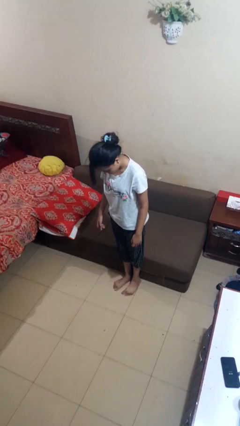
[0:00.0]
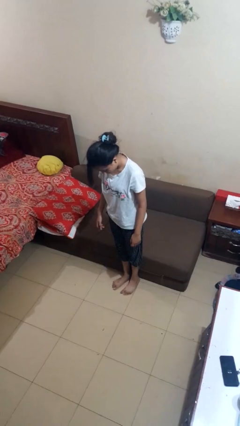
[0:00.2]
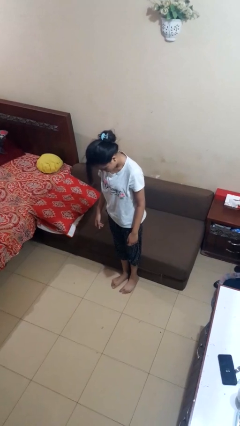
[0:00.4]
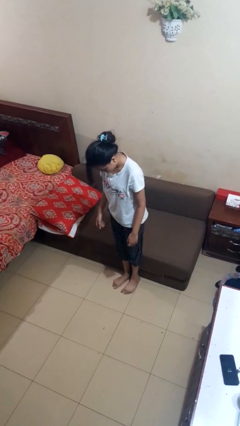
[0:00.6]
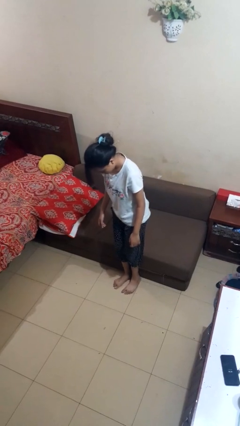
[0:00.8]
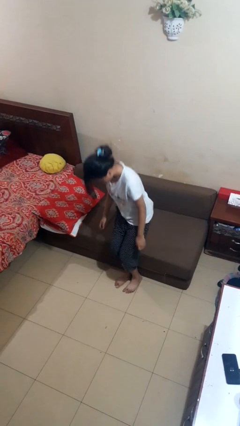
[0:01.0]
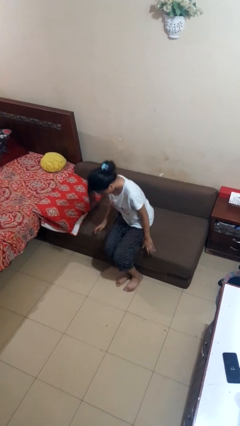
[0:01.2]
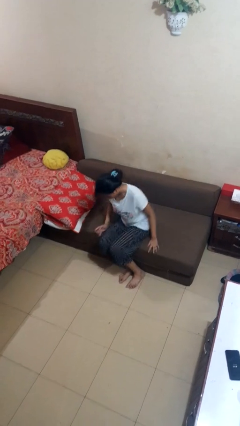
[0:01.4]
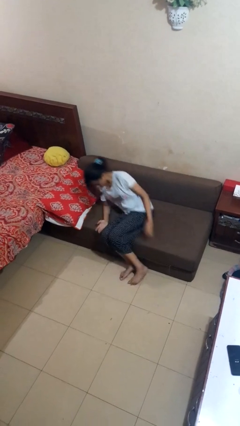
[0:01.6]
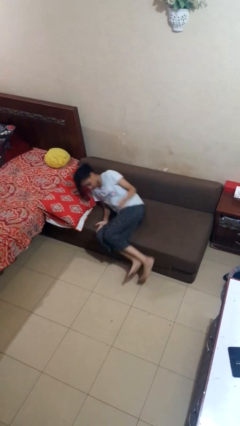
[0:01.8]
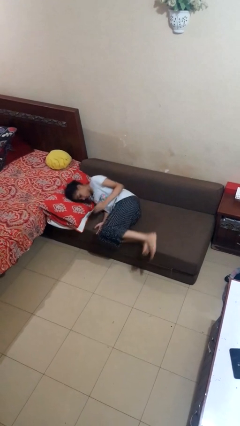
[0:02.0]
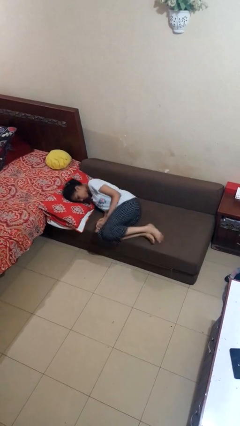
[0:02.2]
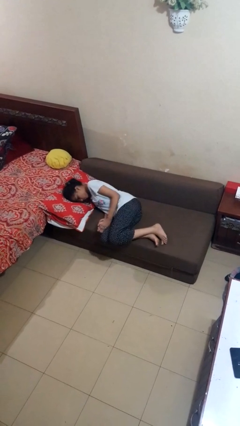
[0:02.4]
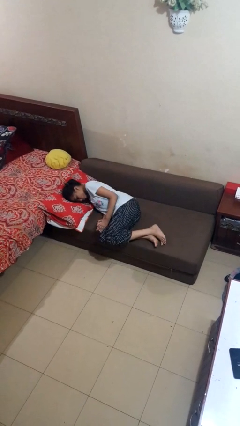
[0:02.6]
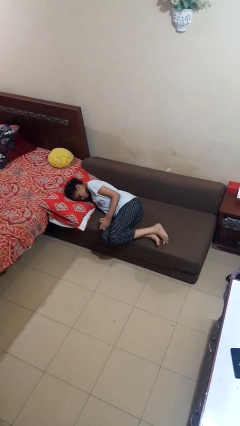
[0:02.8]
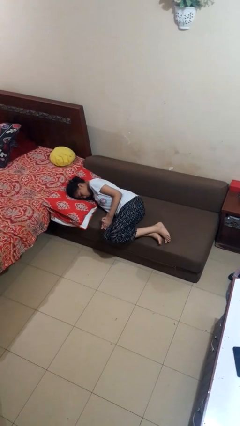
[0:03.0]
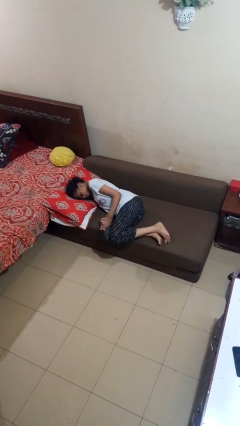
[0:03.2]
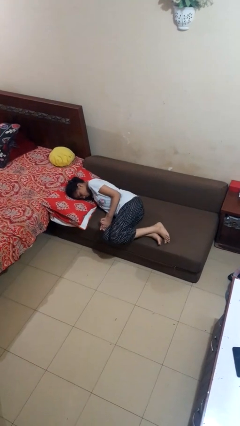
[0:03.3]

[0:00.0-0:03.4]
person lies down on couch

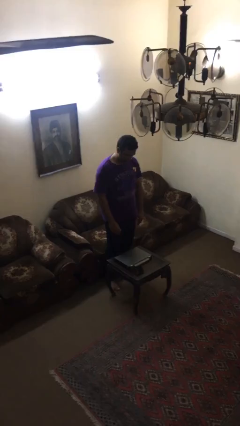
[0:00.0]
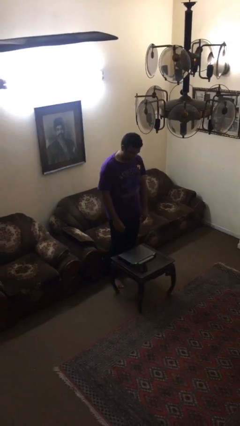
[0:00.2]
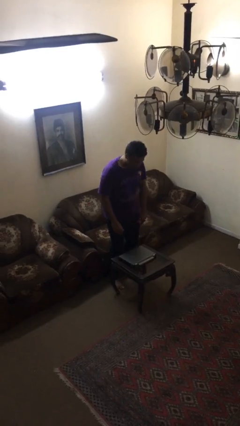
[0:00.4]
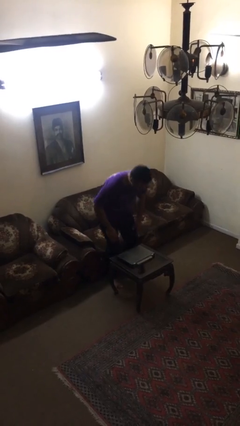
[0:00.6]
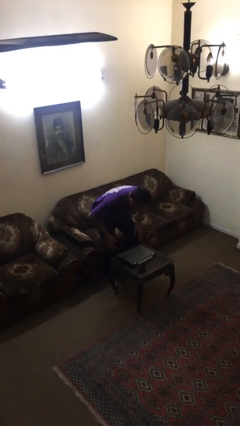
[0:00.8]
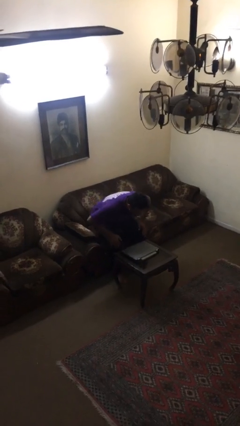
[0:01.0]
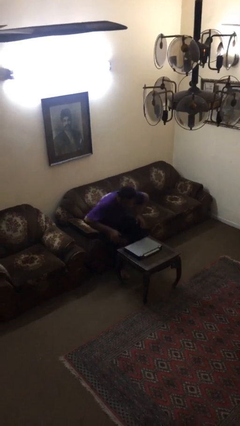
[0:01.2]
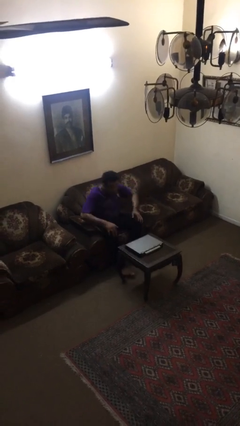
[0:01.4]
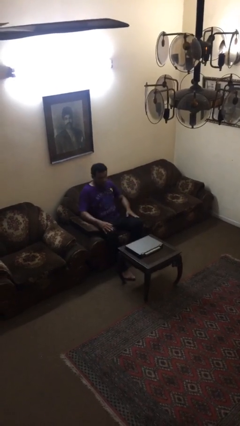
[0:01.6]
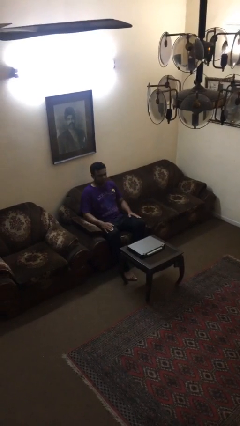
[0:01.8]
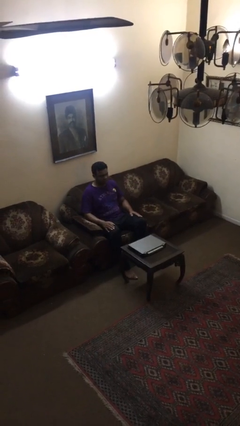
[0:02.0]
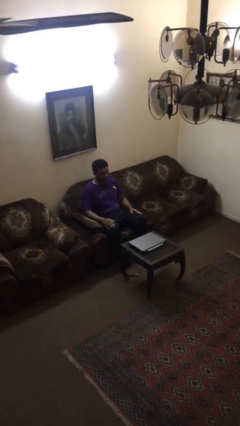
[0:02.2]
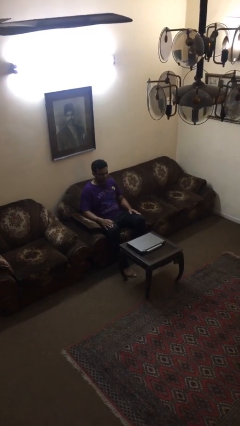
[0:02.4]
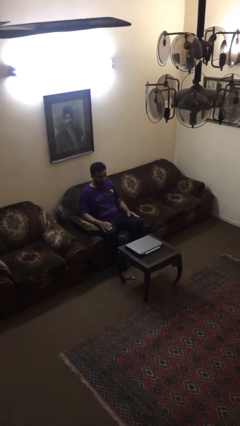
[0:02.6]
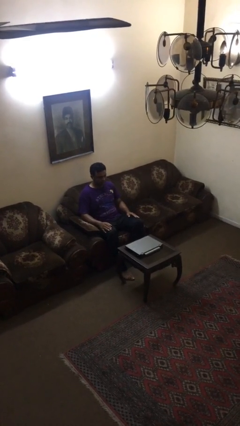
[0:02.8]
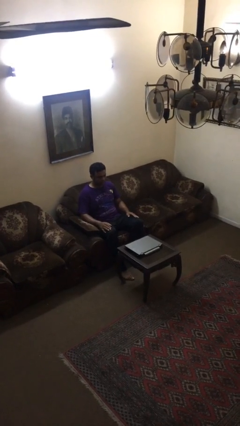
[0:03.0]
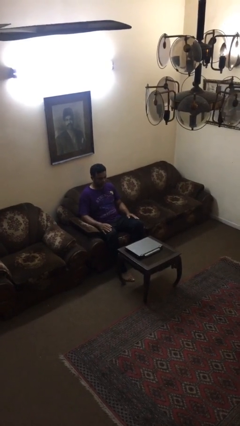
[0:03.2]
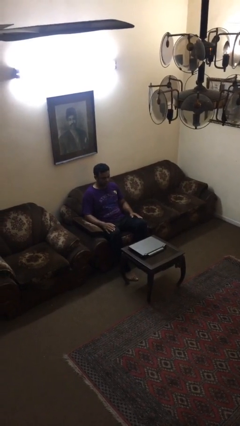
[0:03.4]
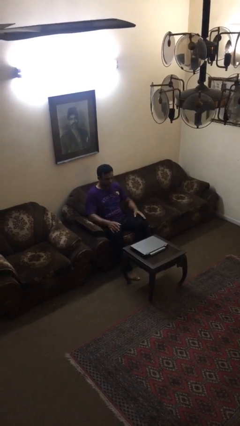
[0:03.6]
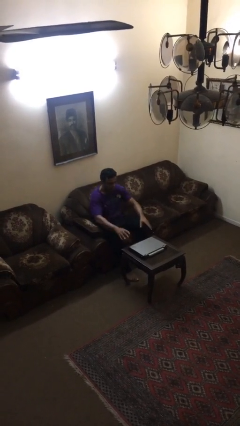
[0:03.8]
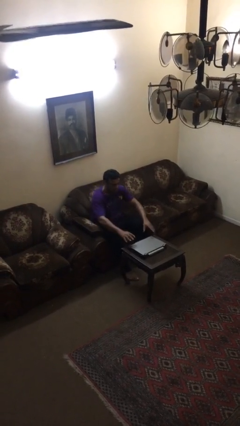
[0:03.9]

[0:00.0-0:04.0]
person sits down

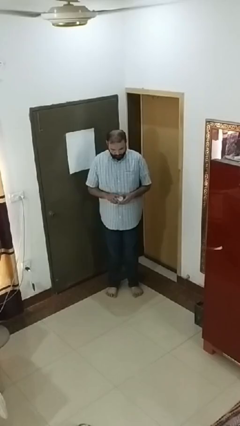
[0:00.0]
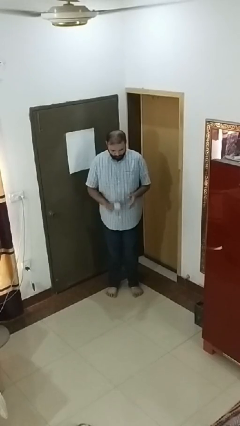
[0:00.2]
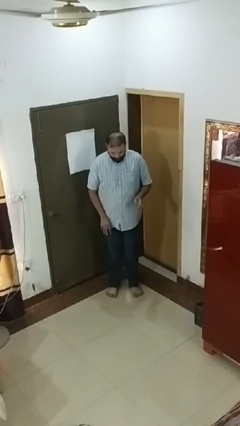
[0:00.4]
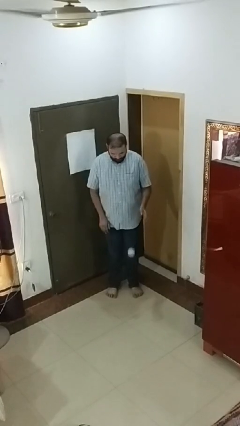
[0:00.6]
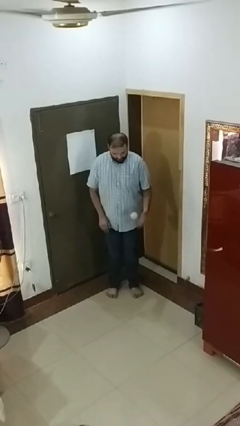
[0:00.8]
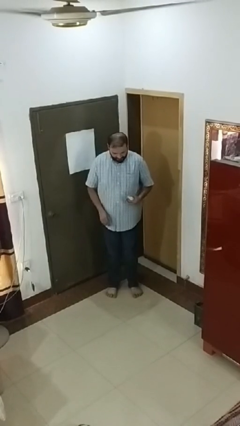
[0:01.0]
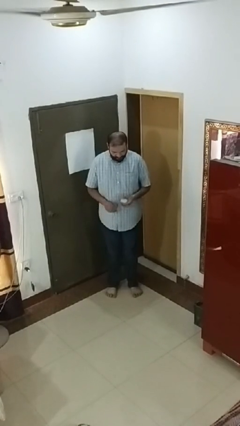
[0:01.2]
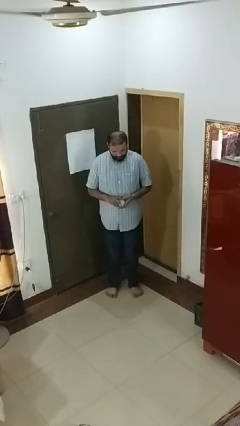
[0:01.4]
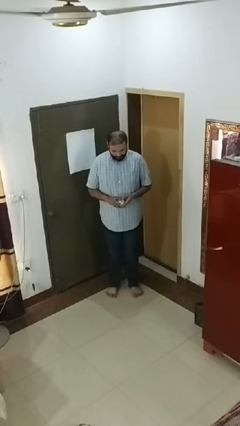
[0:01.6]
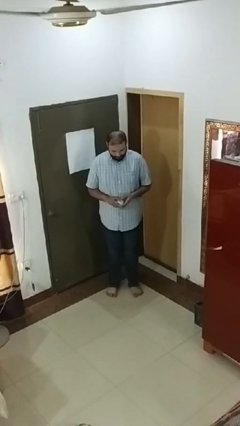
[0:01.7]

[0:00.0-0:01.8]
person bounces ball on floor

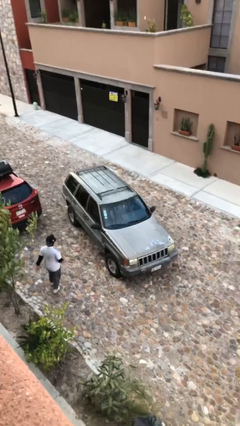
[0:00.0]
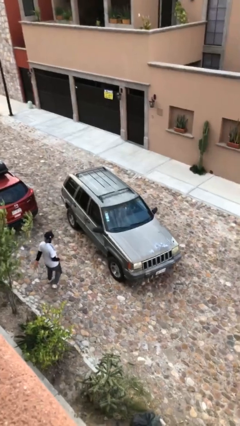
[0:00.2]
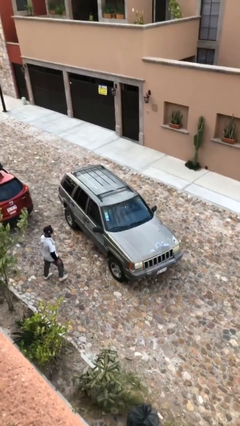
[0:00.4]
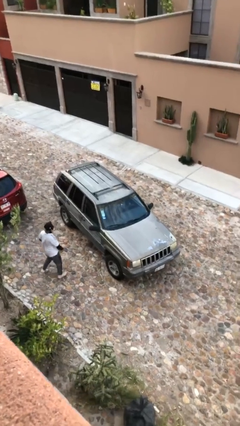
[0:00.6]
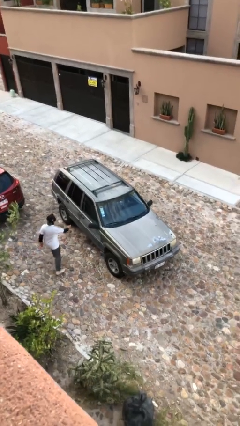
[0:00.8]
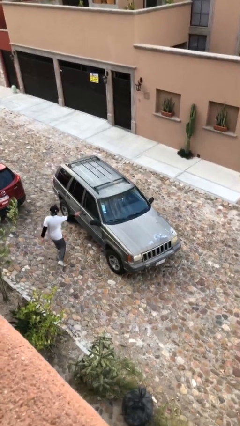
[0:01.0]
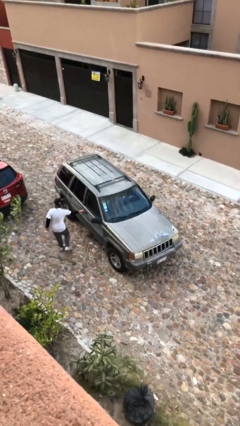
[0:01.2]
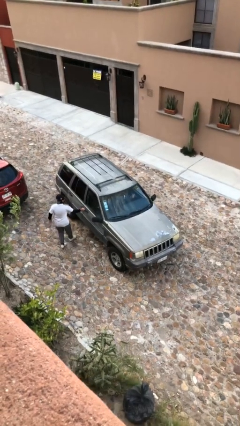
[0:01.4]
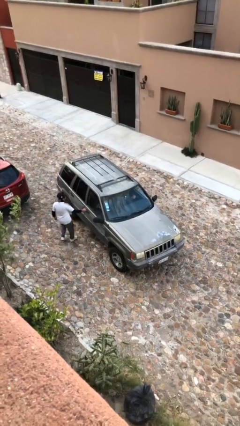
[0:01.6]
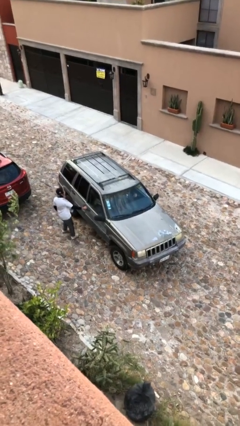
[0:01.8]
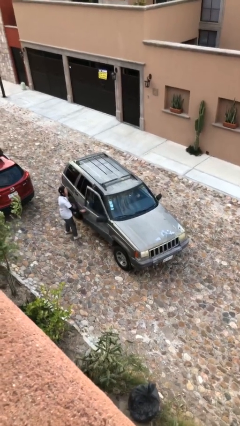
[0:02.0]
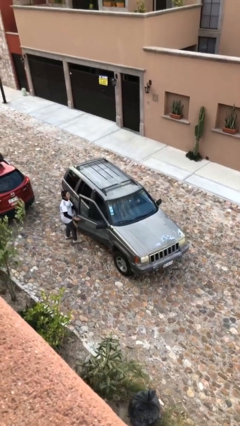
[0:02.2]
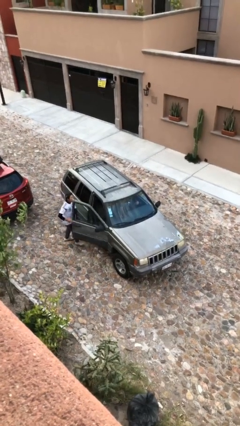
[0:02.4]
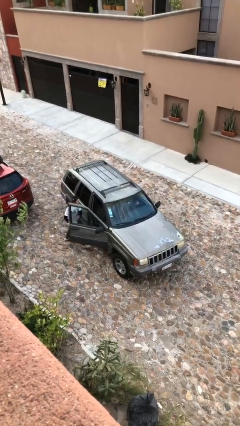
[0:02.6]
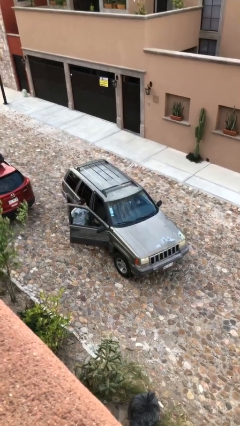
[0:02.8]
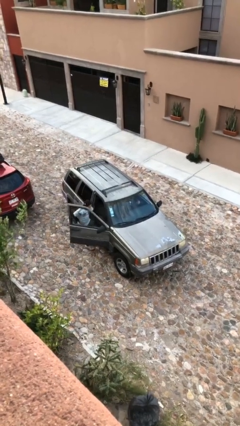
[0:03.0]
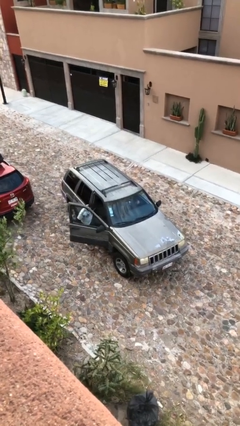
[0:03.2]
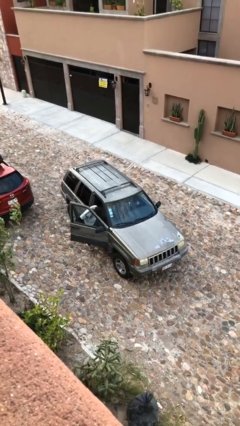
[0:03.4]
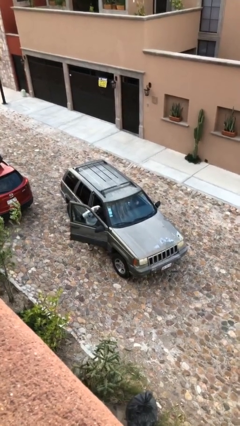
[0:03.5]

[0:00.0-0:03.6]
car picks up person

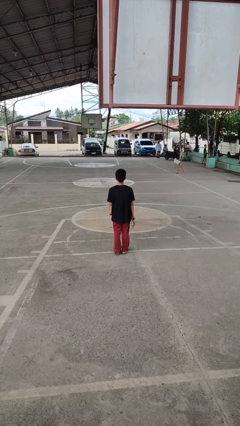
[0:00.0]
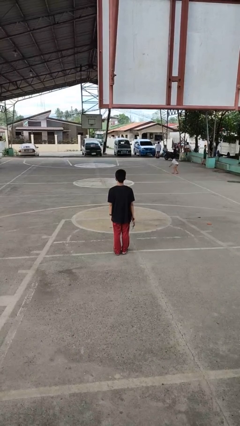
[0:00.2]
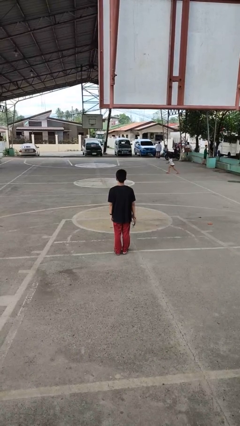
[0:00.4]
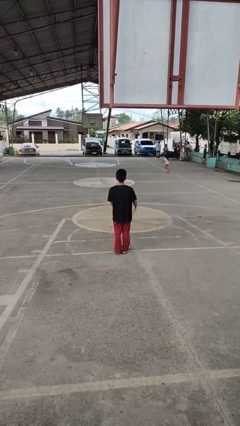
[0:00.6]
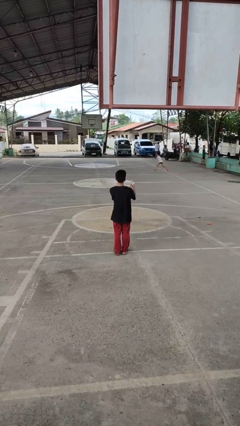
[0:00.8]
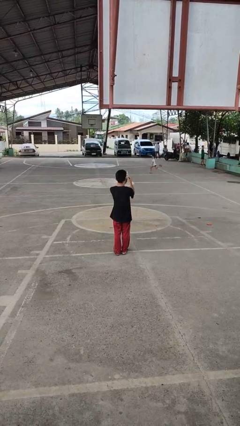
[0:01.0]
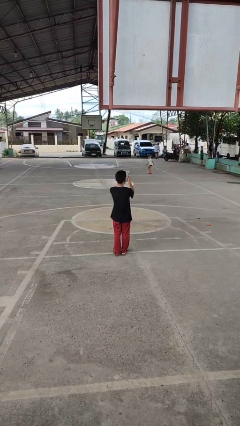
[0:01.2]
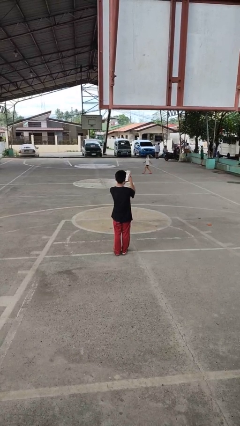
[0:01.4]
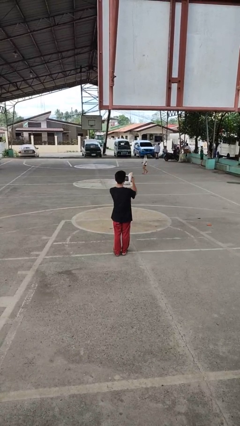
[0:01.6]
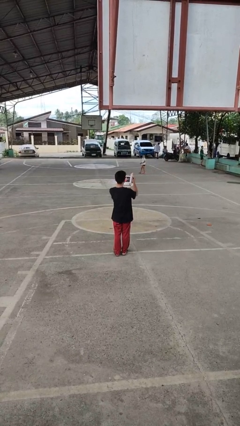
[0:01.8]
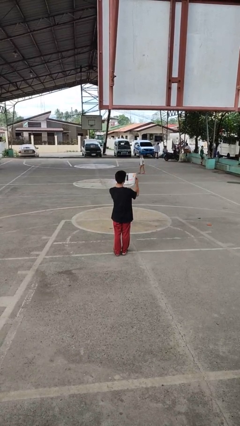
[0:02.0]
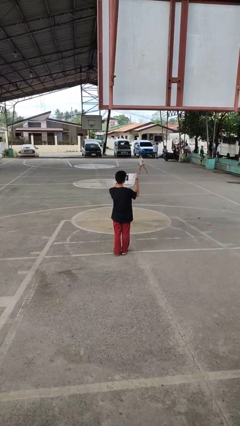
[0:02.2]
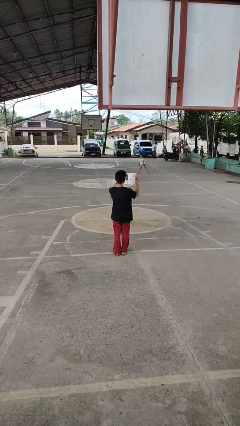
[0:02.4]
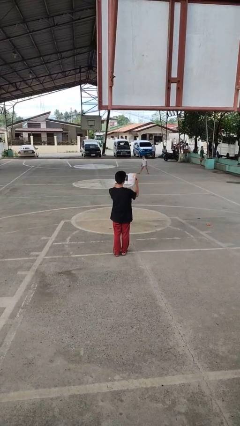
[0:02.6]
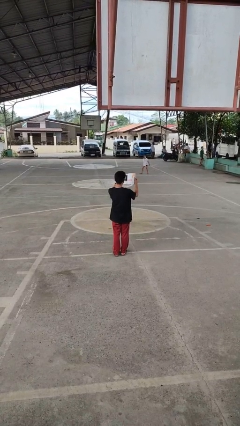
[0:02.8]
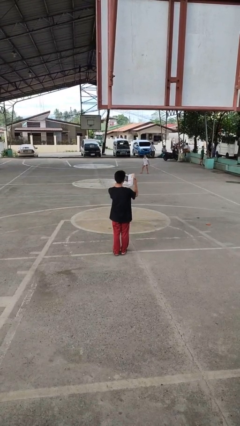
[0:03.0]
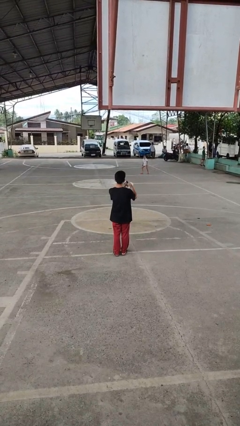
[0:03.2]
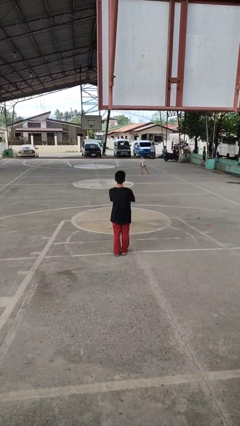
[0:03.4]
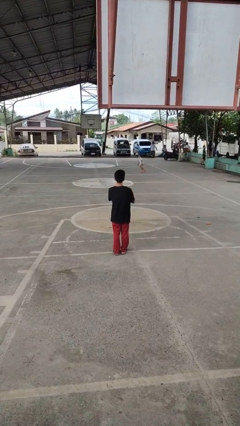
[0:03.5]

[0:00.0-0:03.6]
person reads magazine

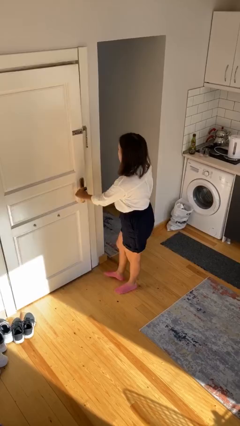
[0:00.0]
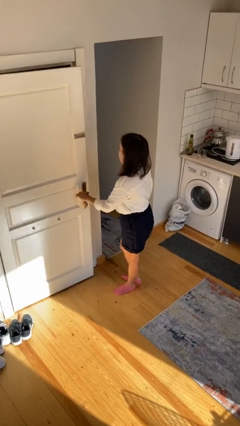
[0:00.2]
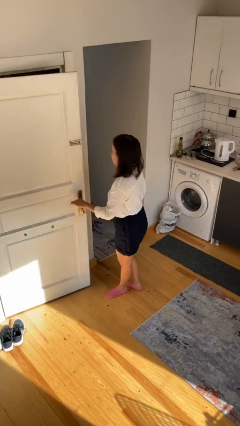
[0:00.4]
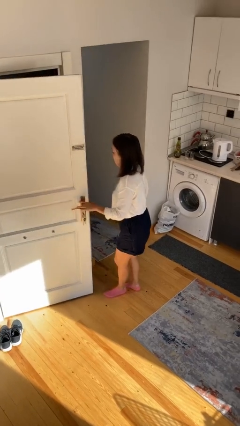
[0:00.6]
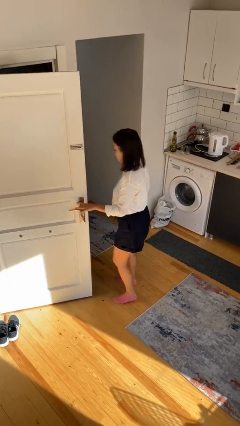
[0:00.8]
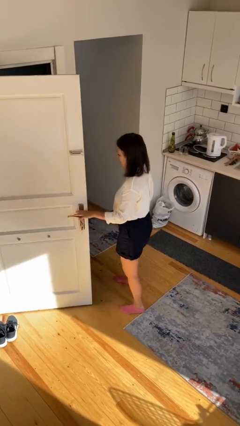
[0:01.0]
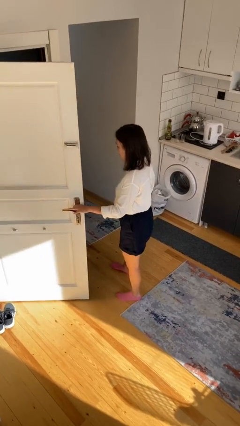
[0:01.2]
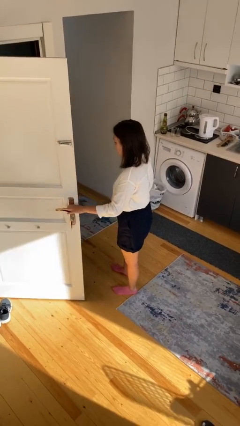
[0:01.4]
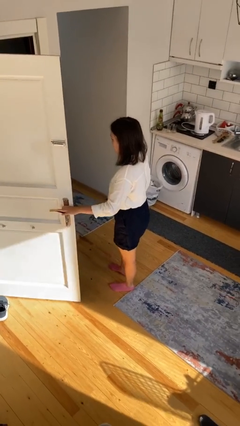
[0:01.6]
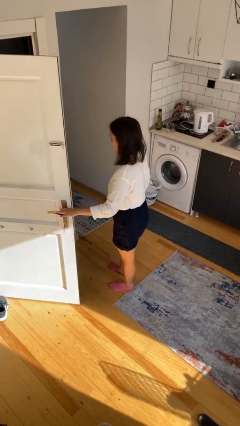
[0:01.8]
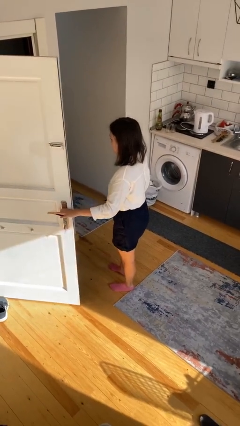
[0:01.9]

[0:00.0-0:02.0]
person opens facility door
